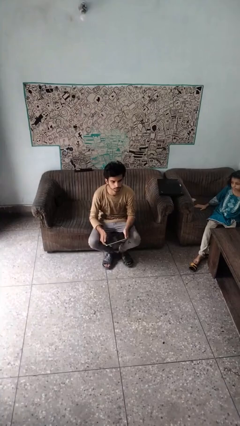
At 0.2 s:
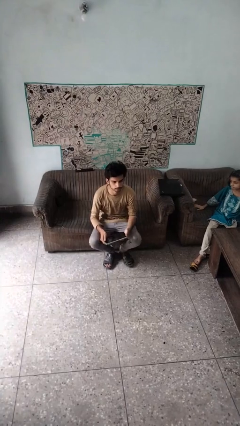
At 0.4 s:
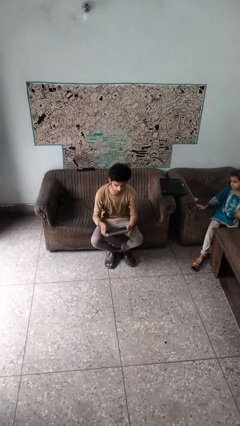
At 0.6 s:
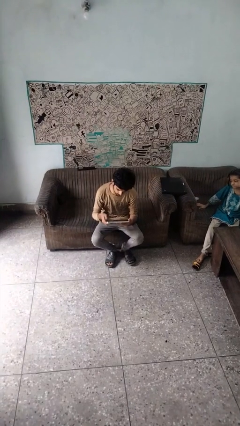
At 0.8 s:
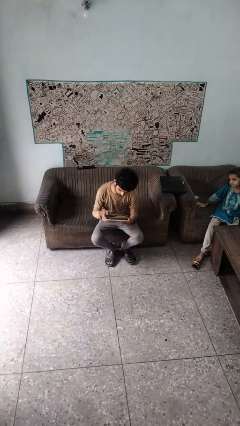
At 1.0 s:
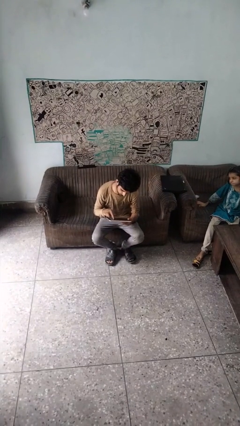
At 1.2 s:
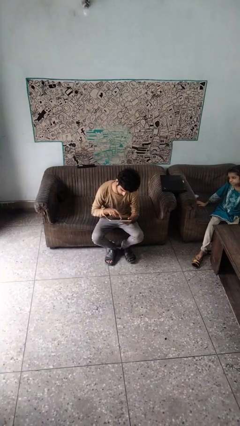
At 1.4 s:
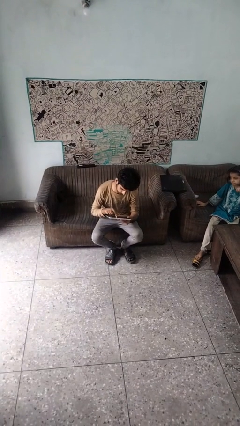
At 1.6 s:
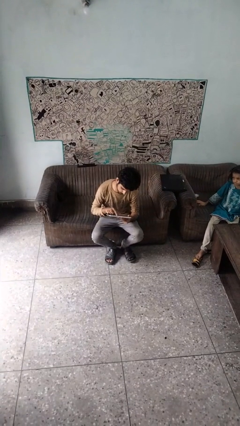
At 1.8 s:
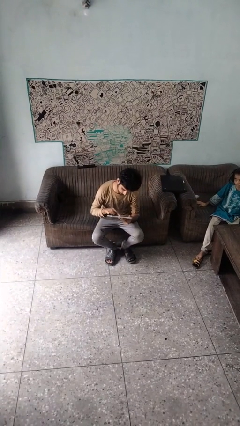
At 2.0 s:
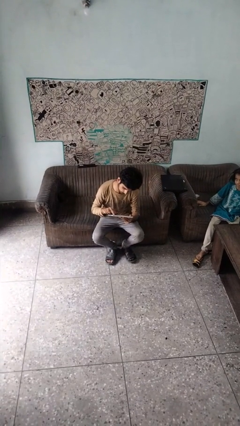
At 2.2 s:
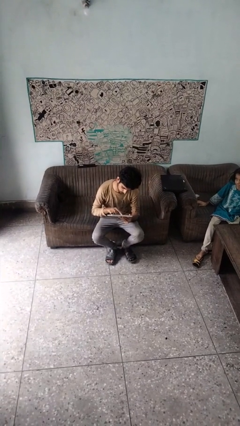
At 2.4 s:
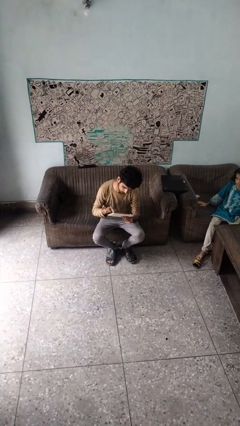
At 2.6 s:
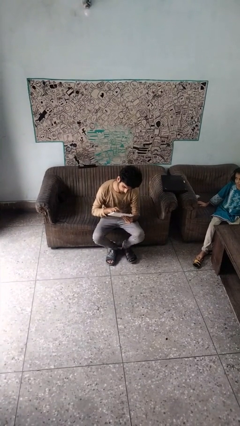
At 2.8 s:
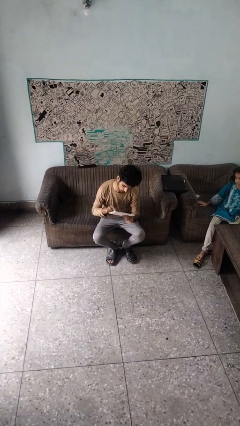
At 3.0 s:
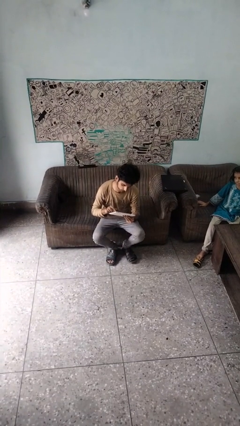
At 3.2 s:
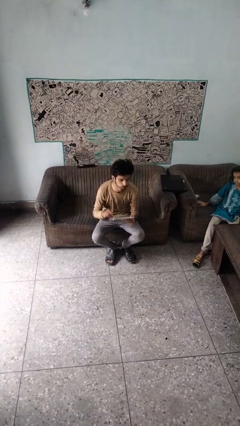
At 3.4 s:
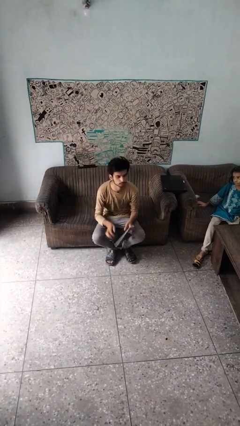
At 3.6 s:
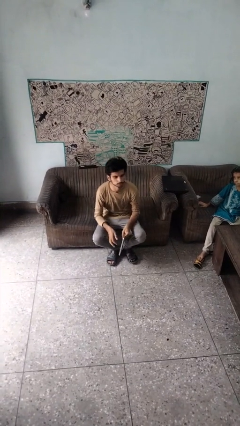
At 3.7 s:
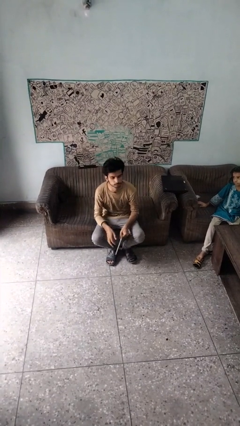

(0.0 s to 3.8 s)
person interacts with tablet

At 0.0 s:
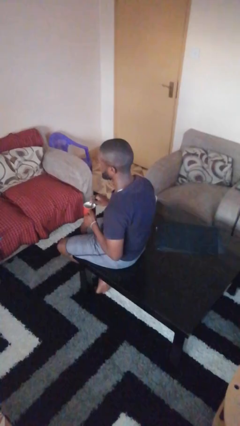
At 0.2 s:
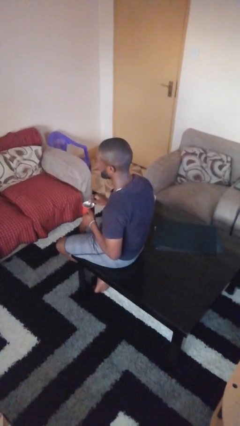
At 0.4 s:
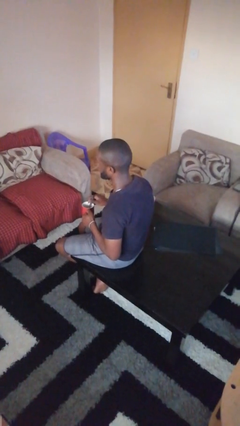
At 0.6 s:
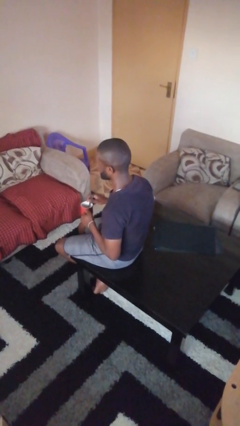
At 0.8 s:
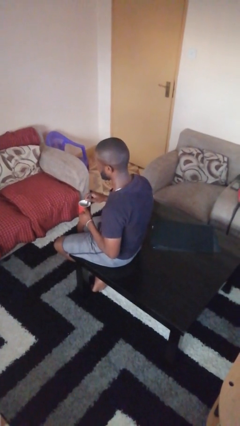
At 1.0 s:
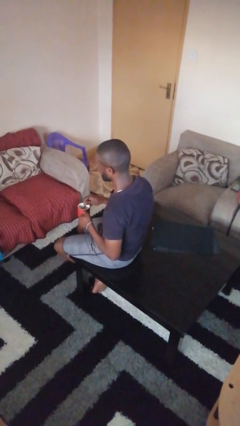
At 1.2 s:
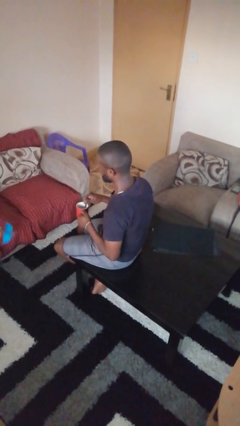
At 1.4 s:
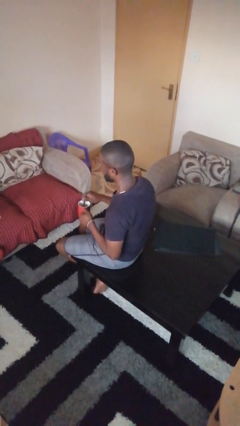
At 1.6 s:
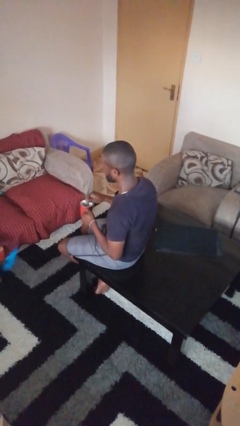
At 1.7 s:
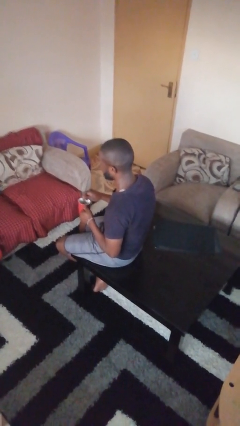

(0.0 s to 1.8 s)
person stirs mug

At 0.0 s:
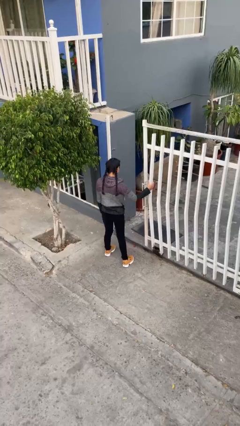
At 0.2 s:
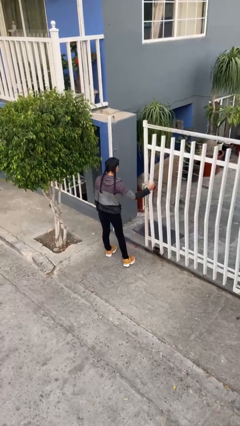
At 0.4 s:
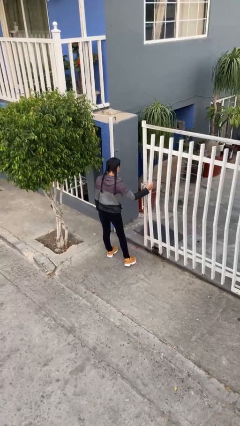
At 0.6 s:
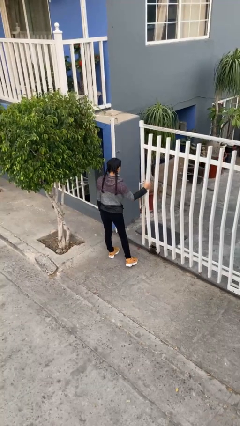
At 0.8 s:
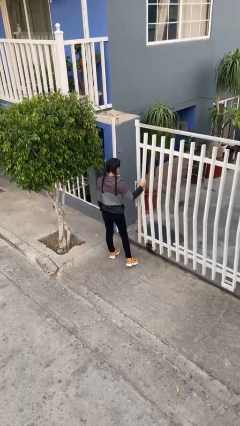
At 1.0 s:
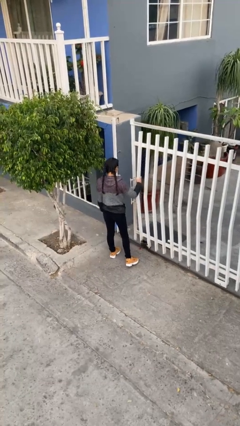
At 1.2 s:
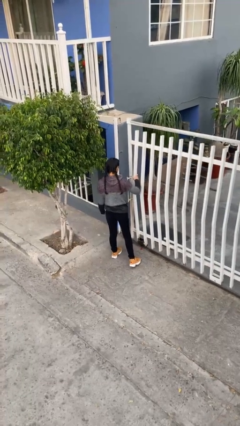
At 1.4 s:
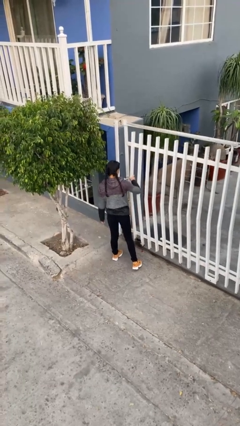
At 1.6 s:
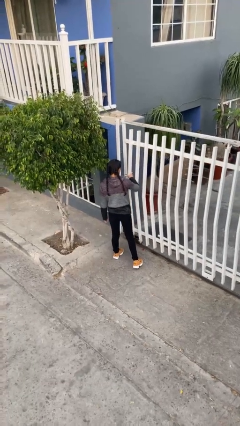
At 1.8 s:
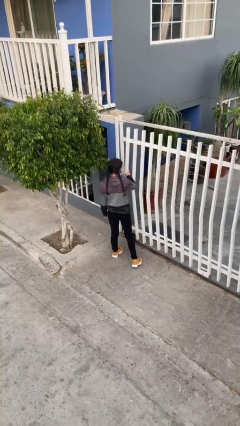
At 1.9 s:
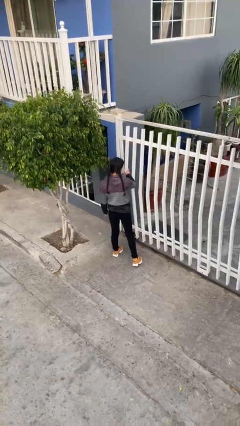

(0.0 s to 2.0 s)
person closes facility door

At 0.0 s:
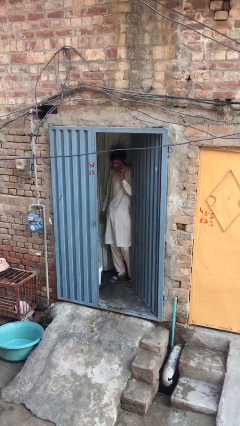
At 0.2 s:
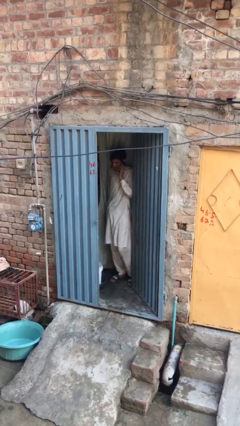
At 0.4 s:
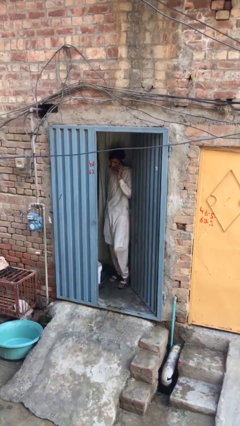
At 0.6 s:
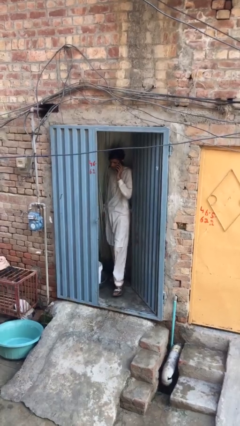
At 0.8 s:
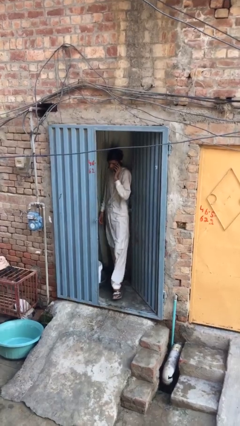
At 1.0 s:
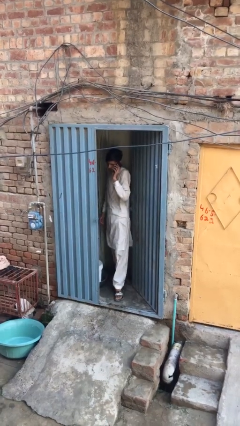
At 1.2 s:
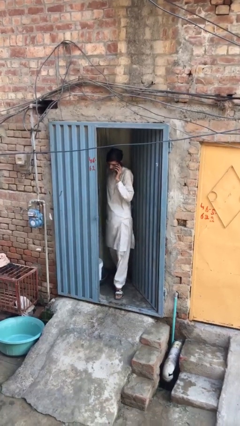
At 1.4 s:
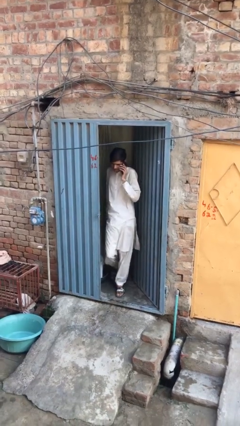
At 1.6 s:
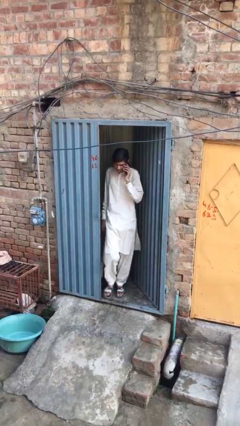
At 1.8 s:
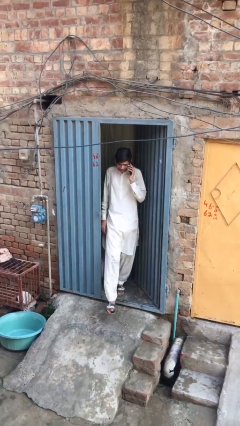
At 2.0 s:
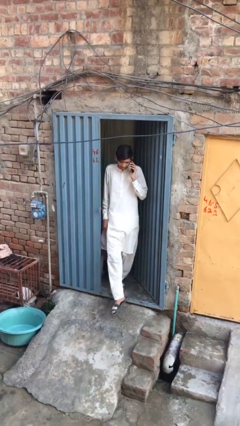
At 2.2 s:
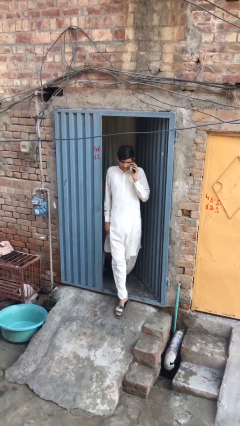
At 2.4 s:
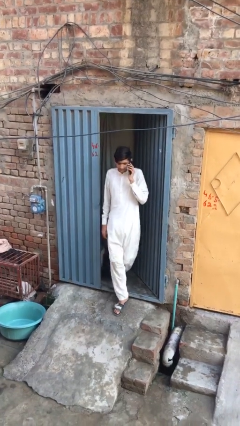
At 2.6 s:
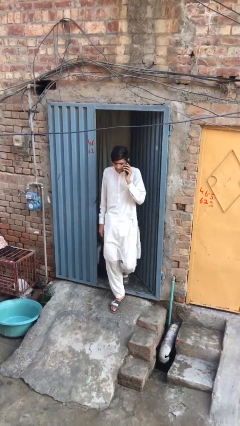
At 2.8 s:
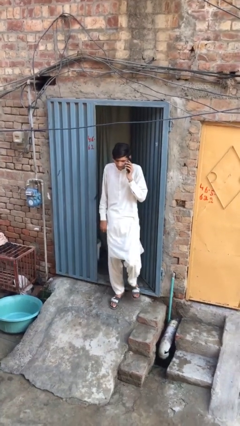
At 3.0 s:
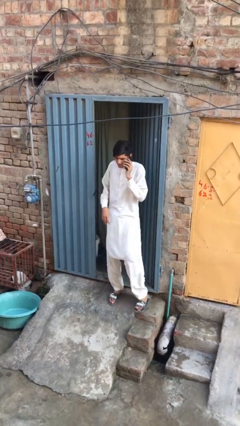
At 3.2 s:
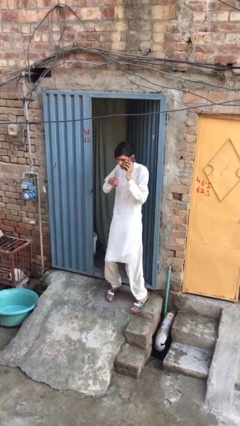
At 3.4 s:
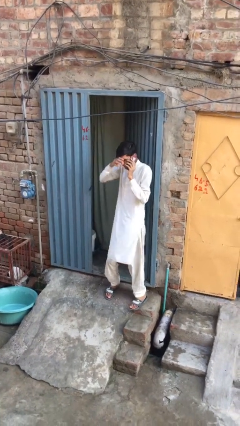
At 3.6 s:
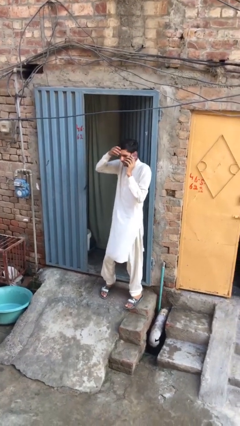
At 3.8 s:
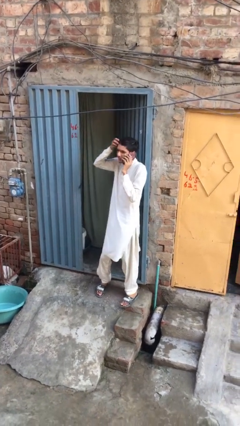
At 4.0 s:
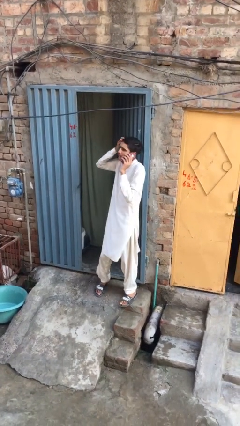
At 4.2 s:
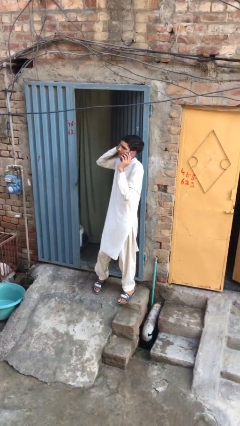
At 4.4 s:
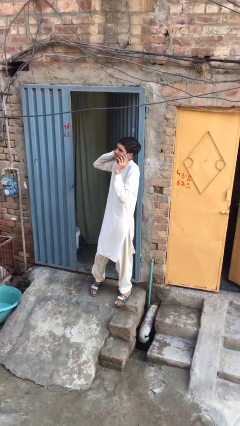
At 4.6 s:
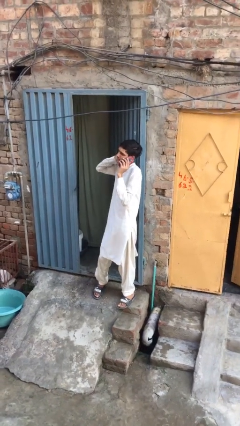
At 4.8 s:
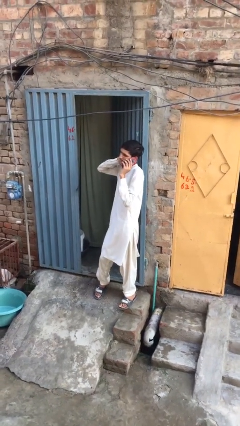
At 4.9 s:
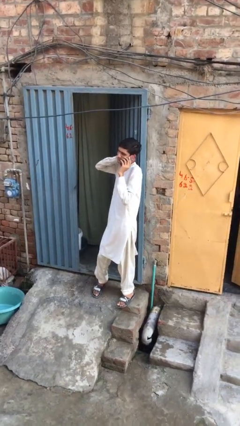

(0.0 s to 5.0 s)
person enters scene through structure

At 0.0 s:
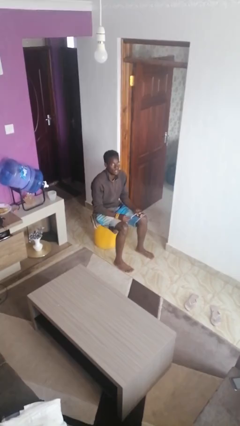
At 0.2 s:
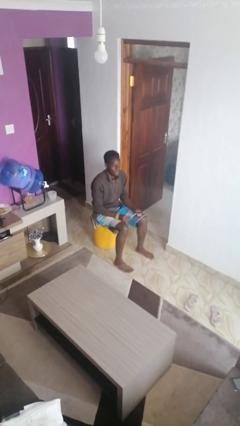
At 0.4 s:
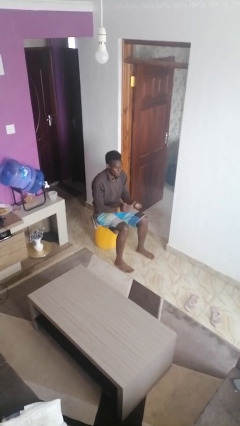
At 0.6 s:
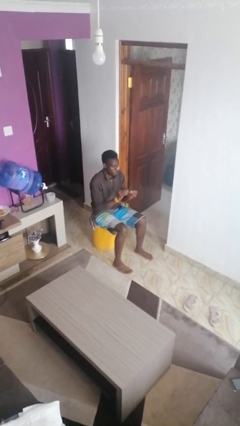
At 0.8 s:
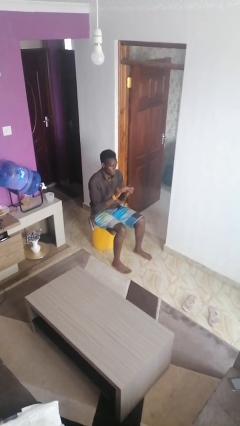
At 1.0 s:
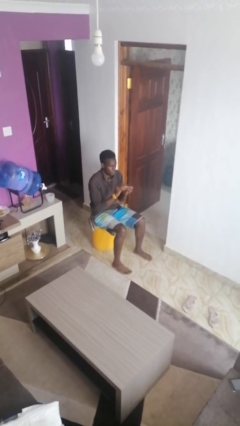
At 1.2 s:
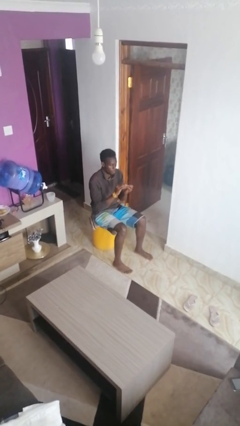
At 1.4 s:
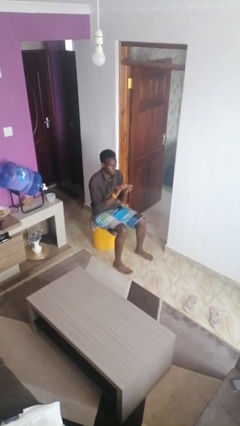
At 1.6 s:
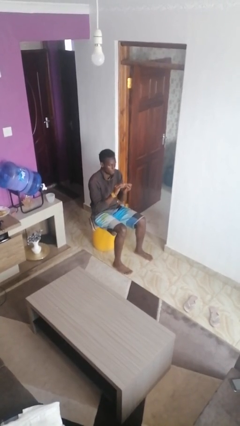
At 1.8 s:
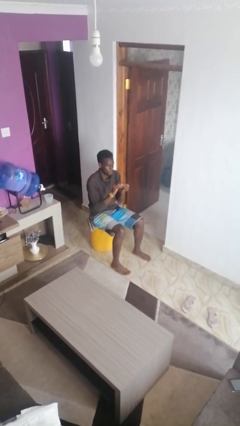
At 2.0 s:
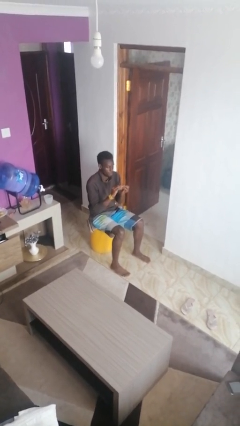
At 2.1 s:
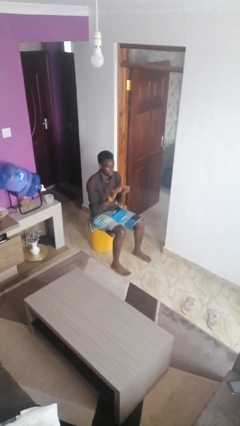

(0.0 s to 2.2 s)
person files fingernails

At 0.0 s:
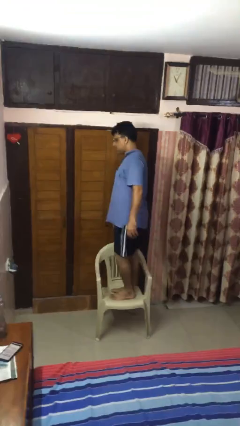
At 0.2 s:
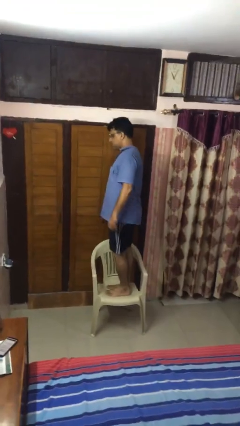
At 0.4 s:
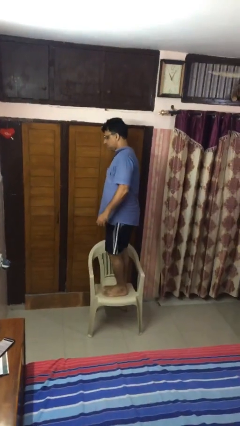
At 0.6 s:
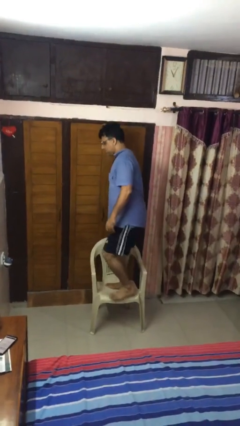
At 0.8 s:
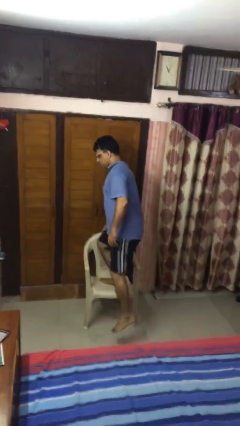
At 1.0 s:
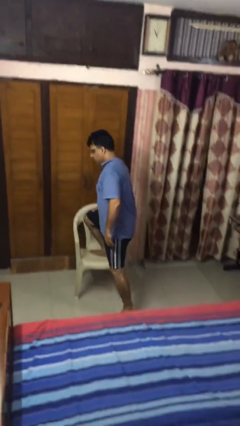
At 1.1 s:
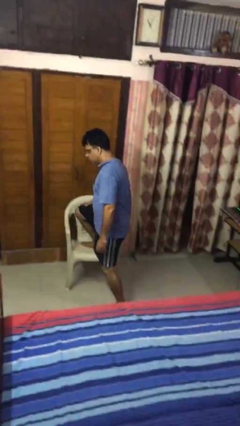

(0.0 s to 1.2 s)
person climbs off chair

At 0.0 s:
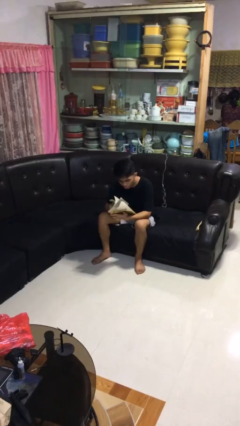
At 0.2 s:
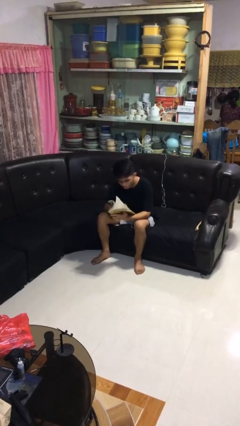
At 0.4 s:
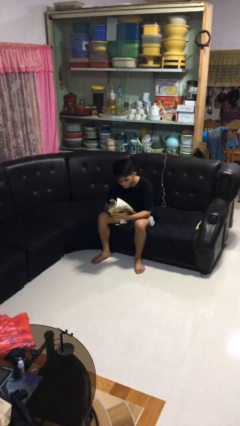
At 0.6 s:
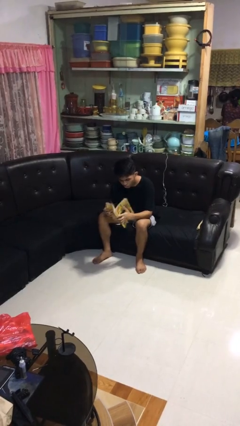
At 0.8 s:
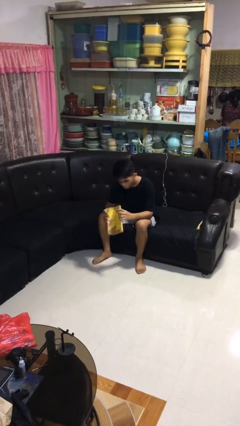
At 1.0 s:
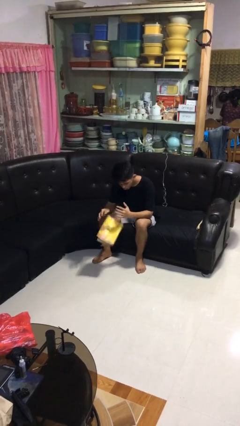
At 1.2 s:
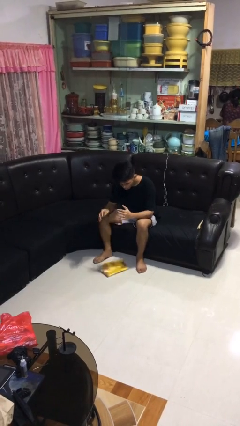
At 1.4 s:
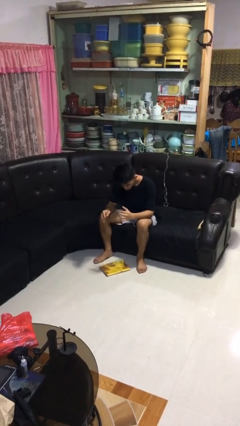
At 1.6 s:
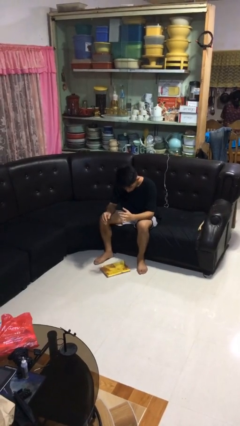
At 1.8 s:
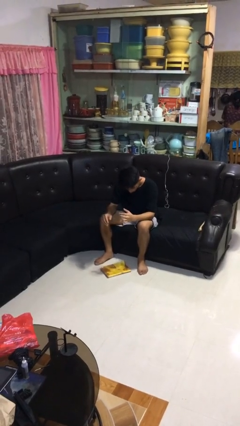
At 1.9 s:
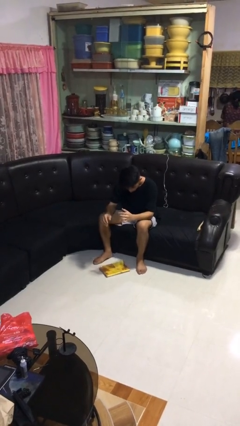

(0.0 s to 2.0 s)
person drops object
